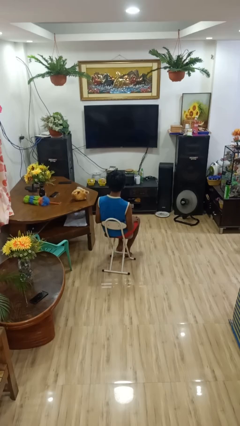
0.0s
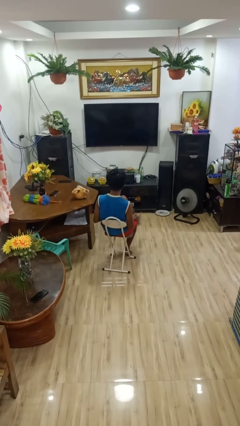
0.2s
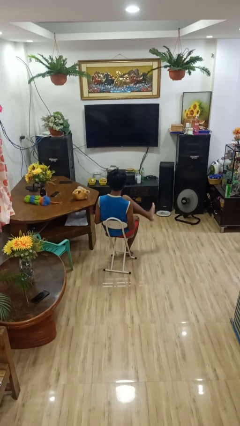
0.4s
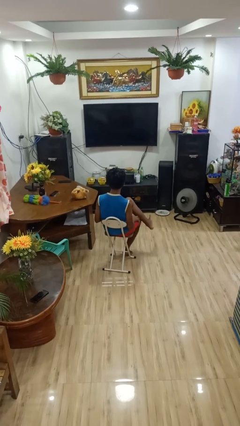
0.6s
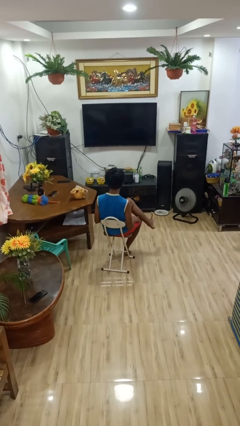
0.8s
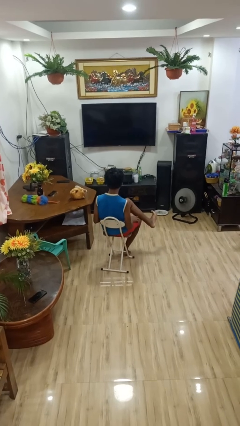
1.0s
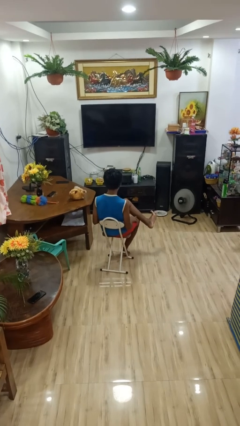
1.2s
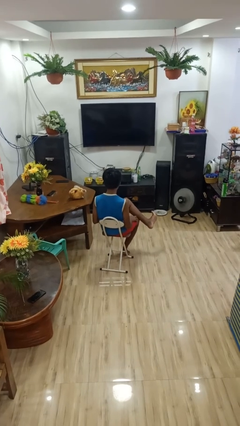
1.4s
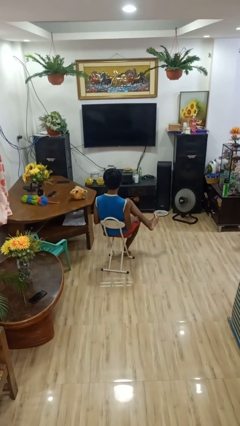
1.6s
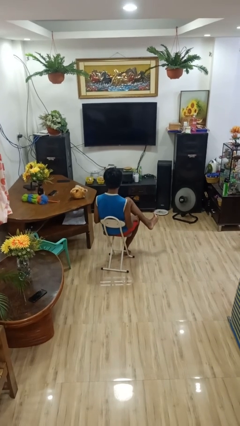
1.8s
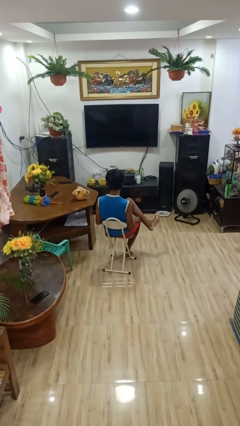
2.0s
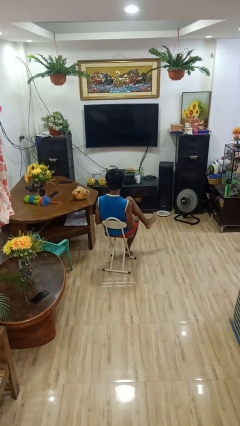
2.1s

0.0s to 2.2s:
person crosses legs

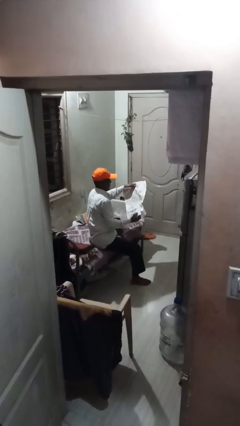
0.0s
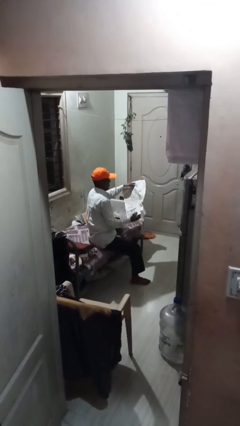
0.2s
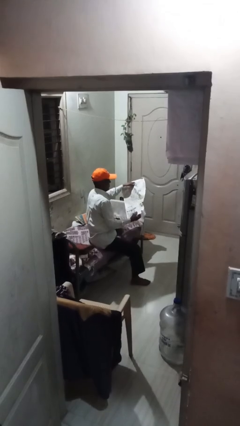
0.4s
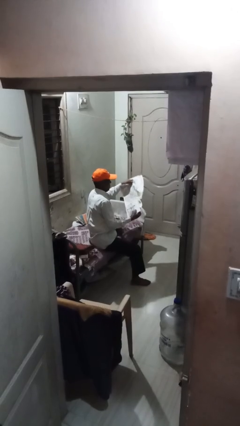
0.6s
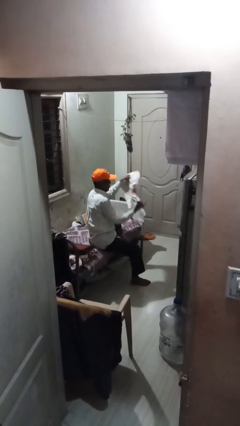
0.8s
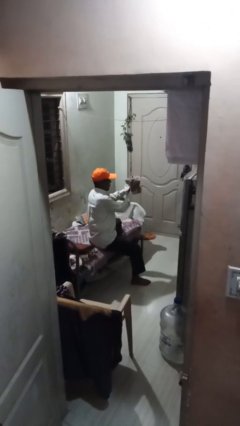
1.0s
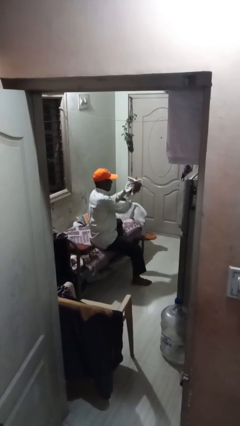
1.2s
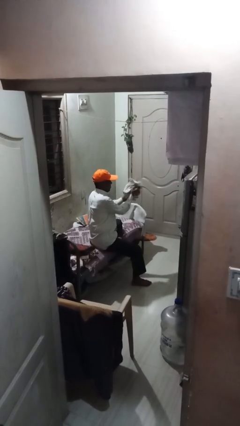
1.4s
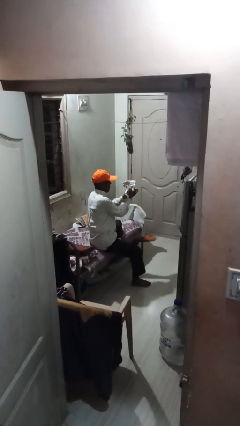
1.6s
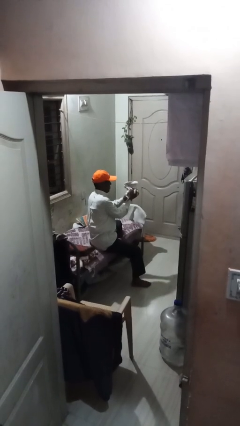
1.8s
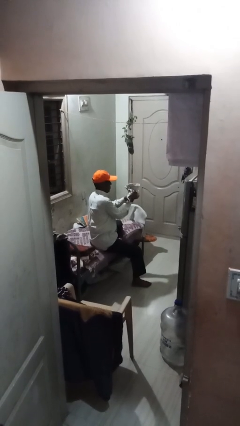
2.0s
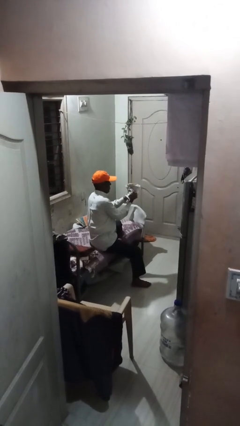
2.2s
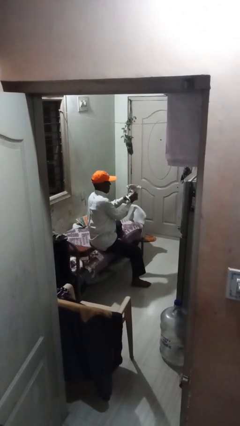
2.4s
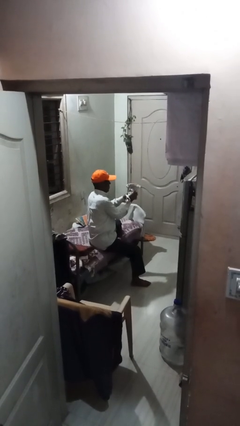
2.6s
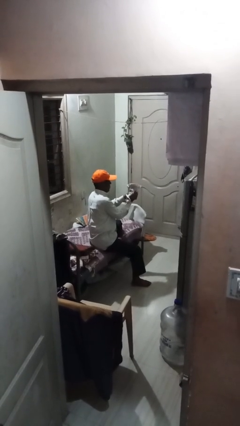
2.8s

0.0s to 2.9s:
person crumples paper

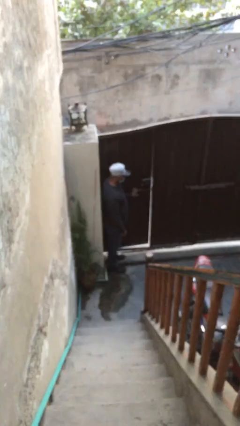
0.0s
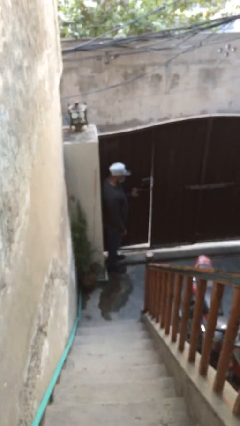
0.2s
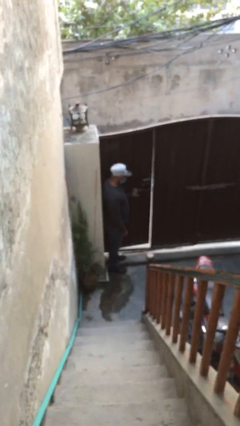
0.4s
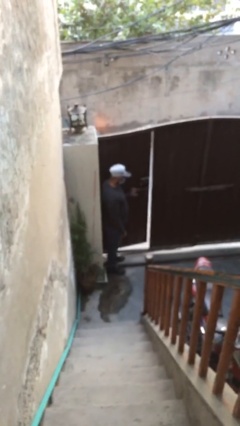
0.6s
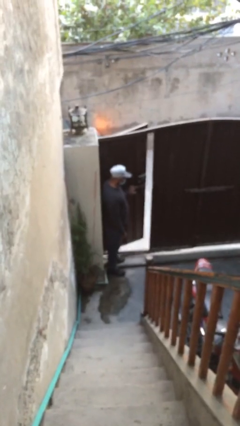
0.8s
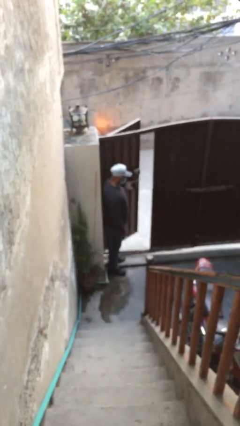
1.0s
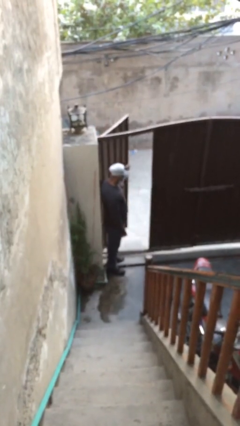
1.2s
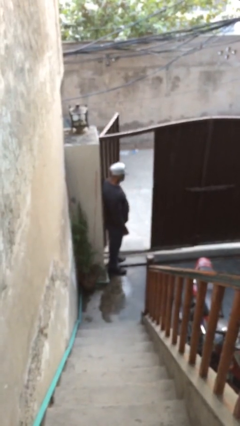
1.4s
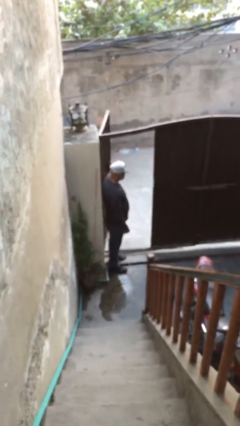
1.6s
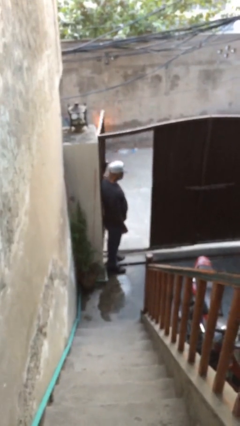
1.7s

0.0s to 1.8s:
person opens facility door

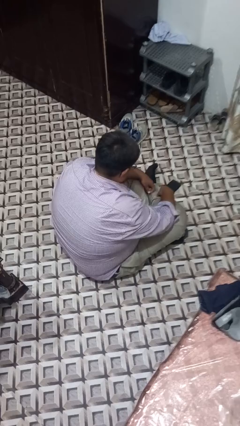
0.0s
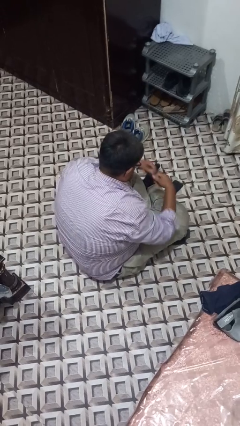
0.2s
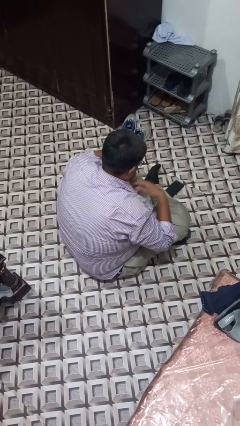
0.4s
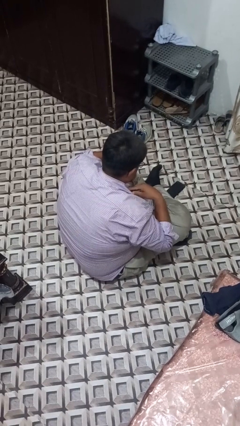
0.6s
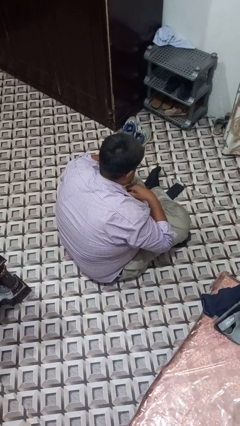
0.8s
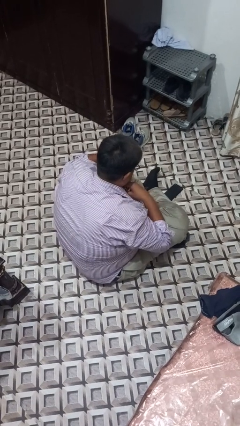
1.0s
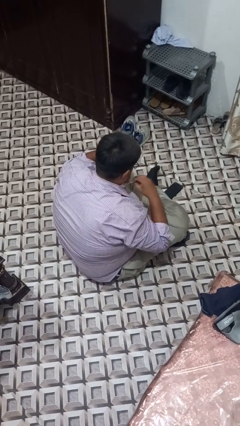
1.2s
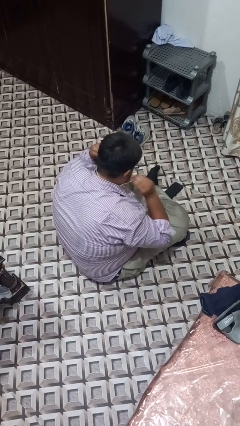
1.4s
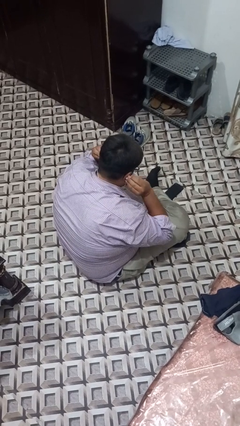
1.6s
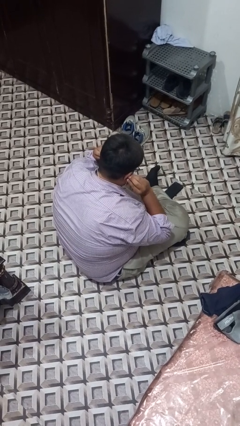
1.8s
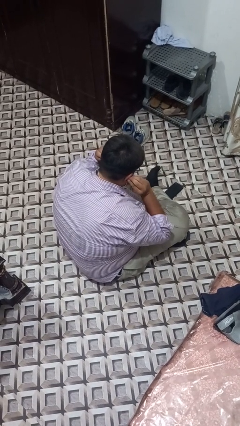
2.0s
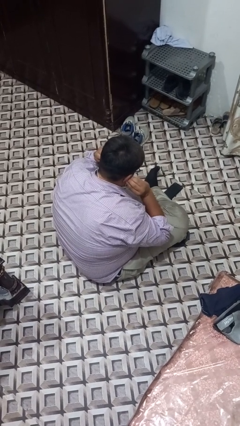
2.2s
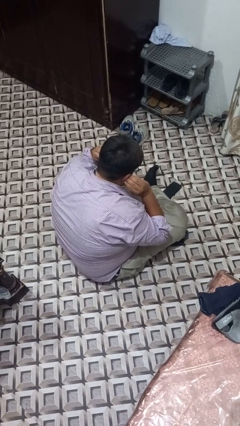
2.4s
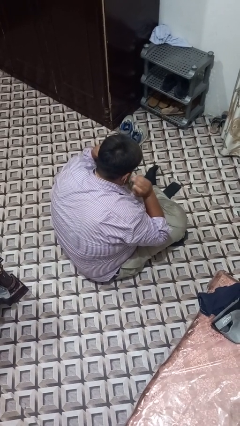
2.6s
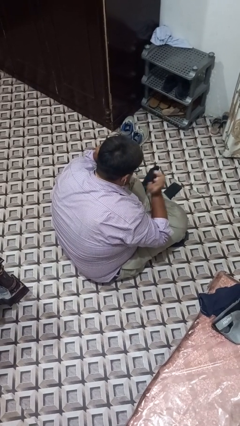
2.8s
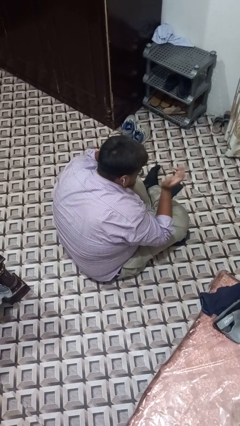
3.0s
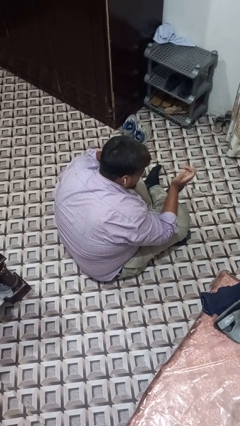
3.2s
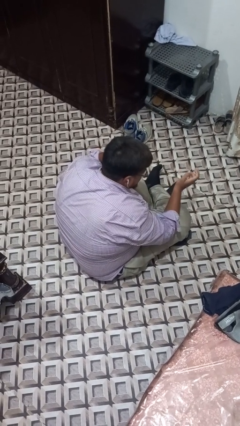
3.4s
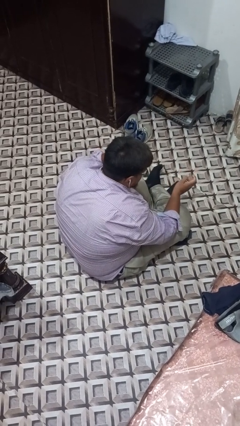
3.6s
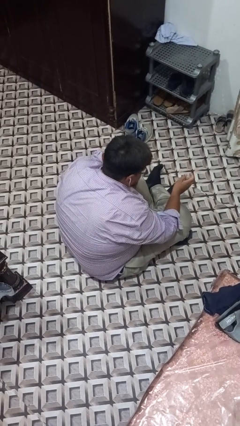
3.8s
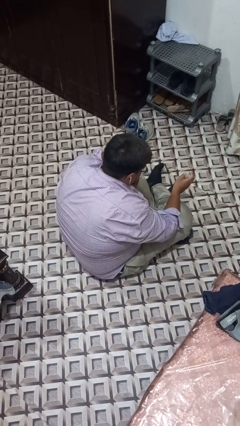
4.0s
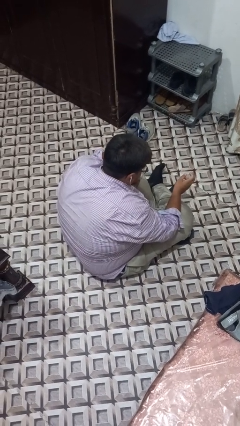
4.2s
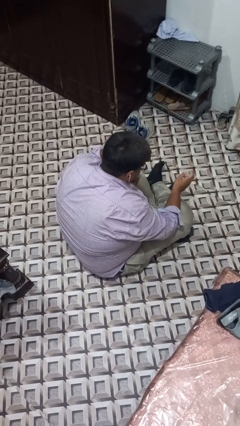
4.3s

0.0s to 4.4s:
person puts on headphones

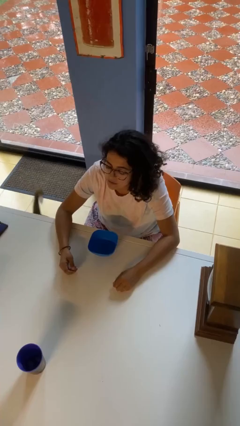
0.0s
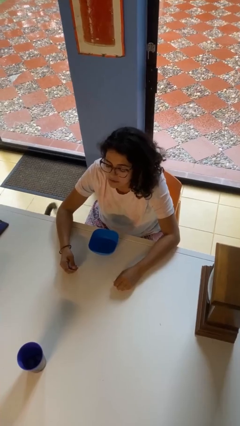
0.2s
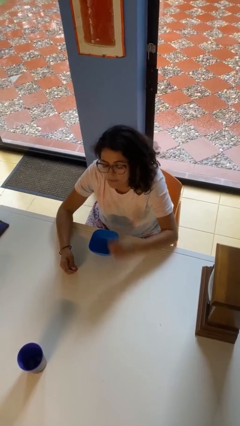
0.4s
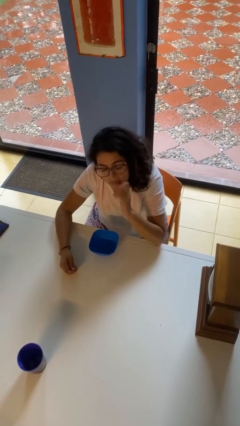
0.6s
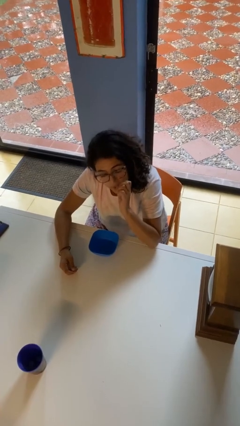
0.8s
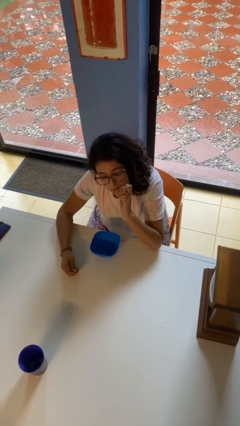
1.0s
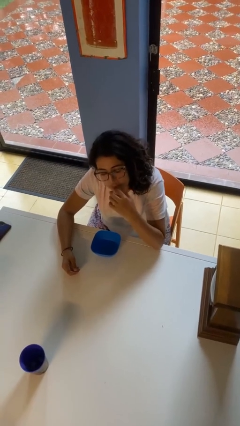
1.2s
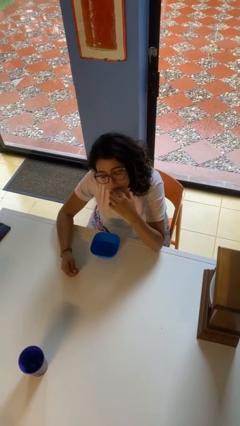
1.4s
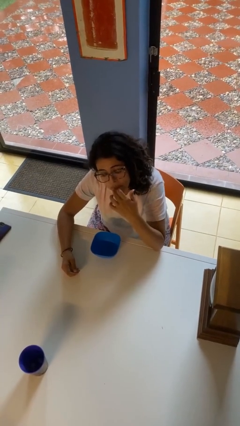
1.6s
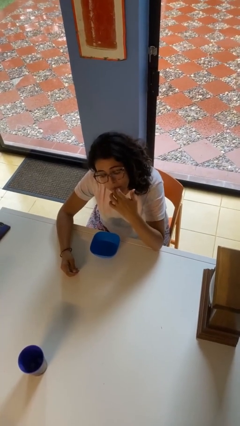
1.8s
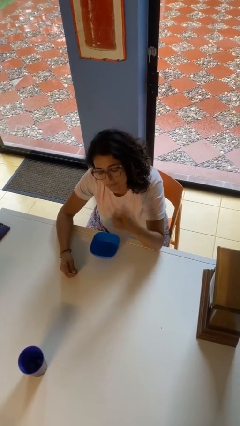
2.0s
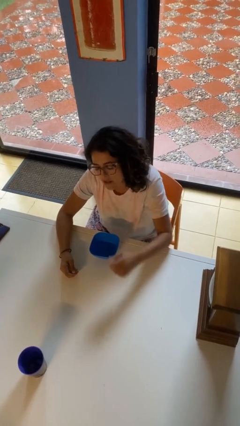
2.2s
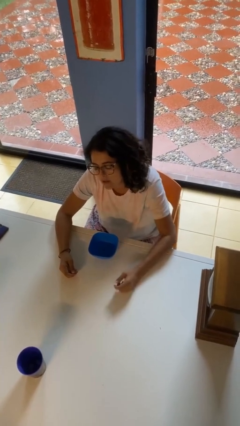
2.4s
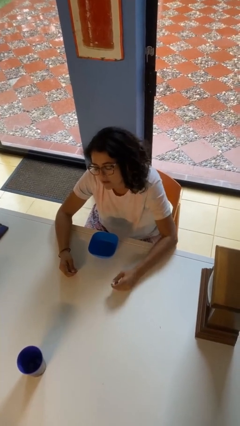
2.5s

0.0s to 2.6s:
person licks fingers

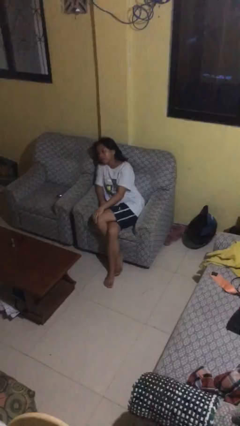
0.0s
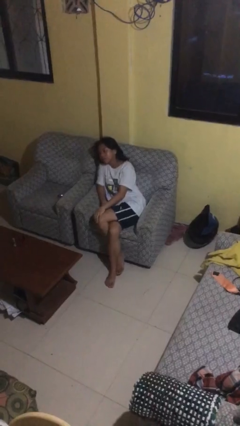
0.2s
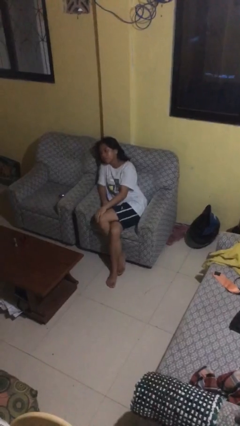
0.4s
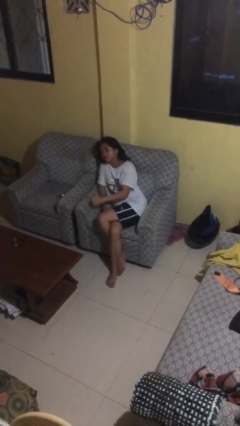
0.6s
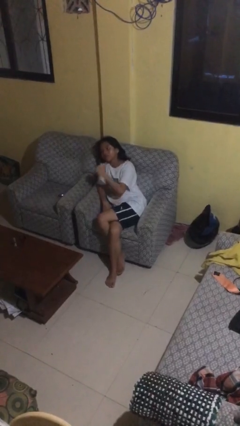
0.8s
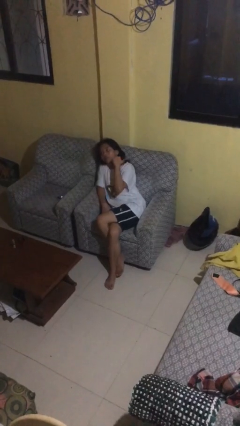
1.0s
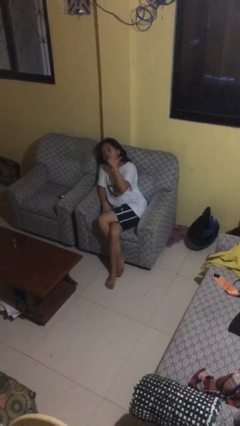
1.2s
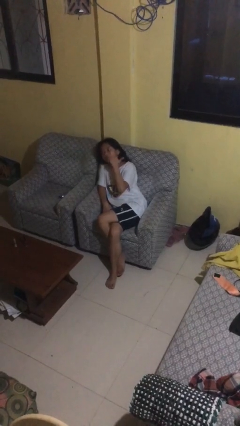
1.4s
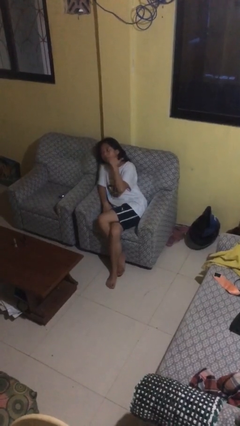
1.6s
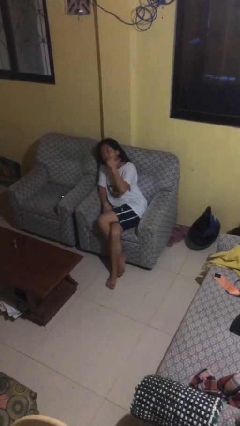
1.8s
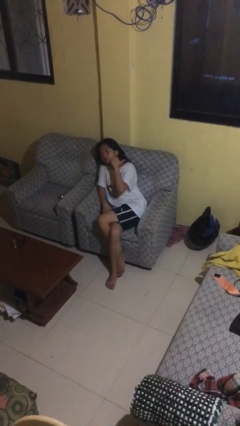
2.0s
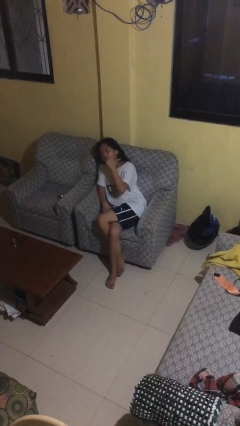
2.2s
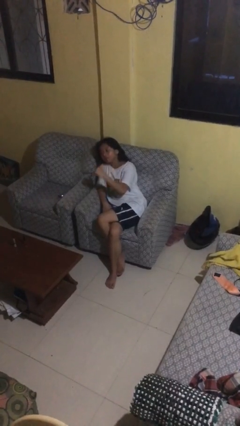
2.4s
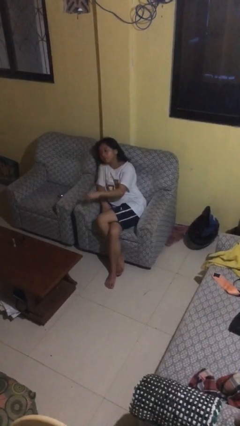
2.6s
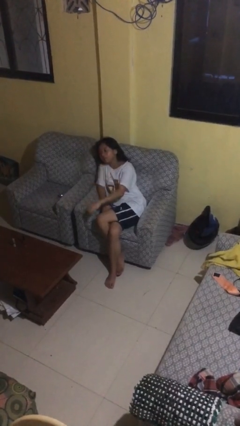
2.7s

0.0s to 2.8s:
person gestures behind me

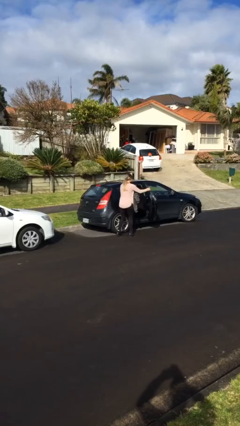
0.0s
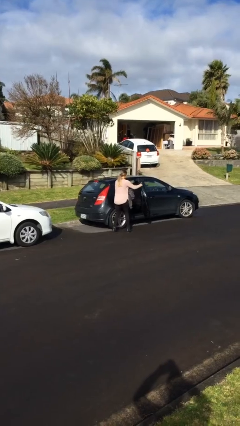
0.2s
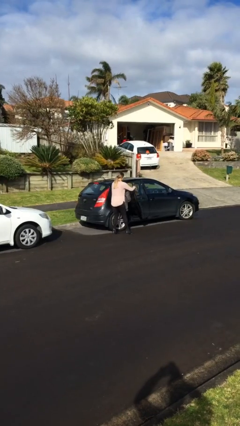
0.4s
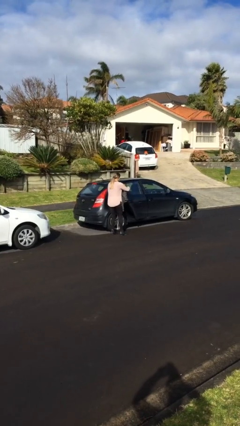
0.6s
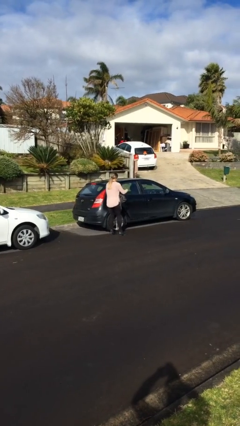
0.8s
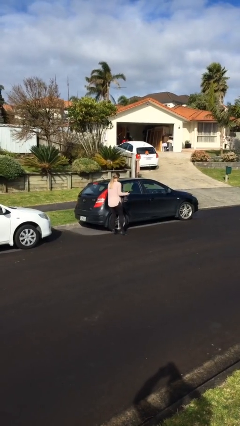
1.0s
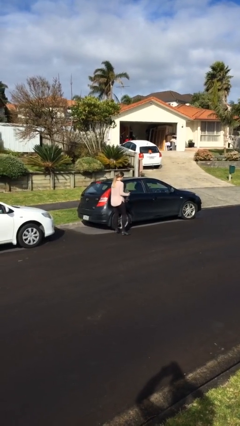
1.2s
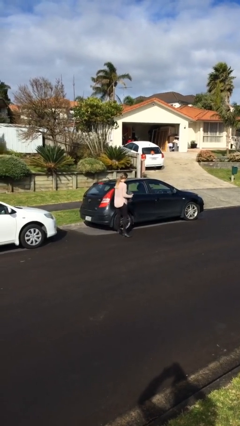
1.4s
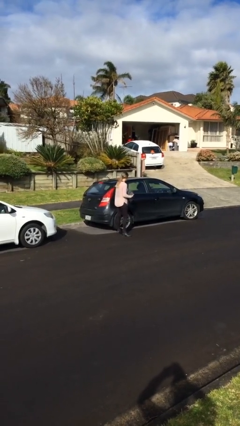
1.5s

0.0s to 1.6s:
person closes car door
